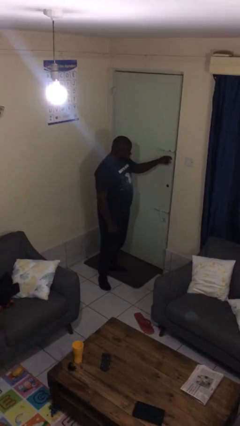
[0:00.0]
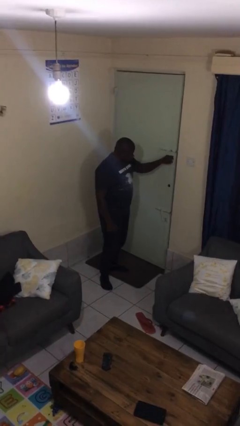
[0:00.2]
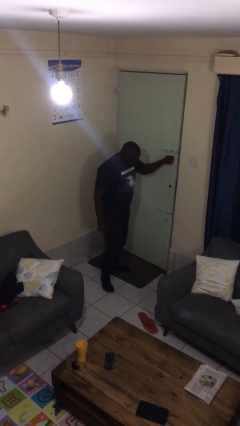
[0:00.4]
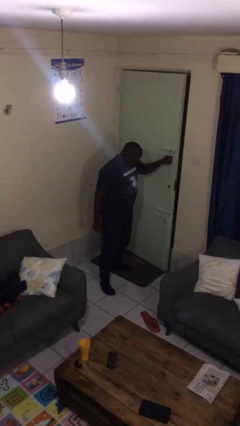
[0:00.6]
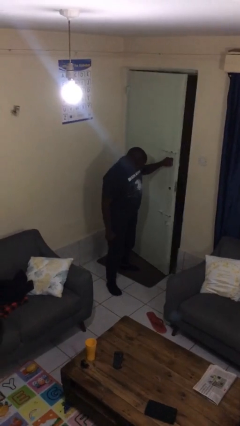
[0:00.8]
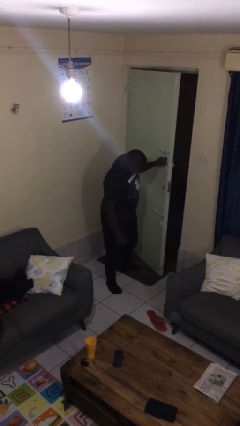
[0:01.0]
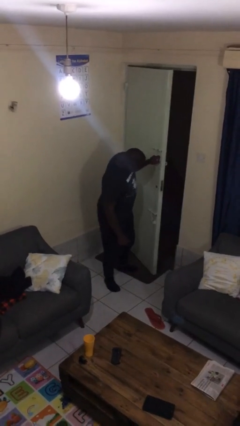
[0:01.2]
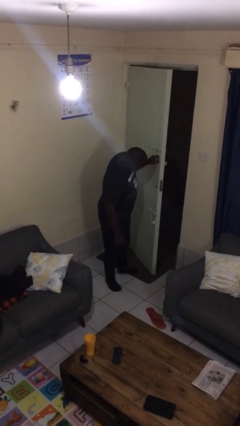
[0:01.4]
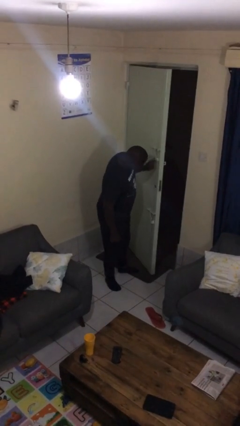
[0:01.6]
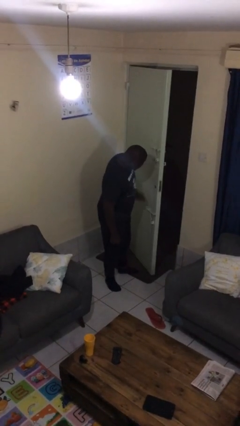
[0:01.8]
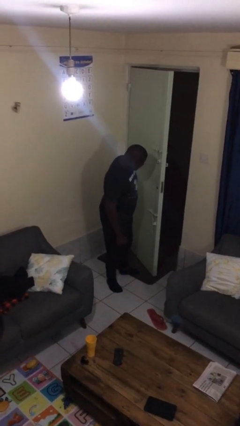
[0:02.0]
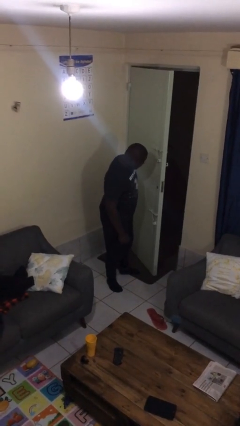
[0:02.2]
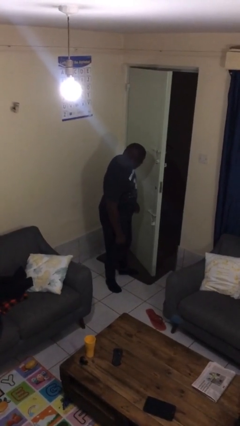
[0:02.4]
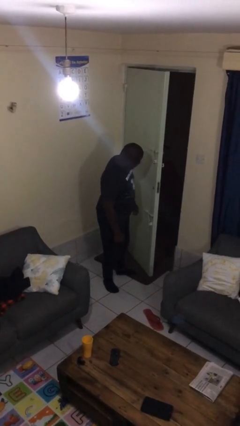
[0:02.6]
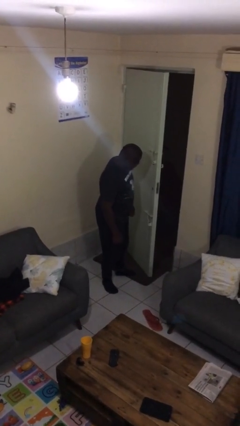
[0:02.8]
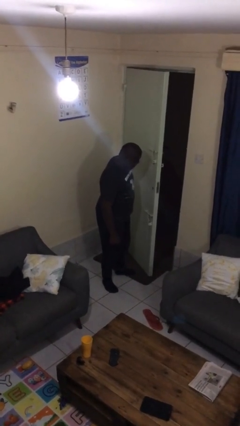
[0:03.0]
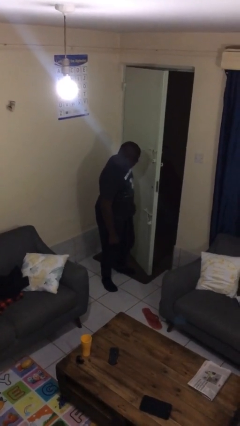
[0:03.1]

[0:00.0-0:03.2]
person opens facility door

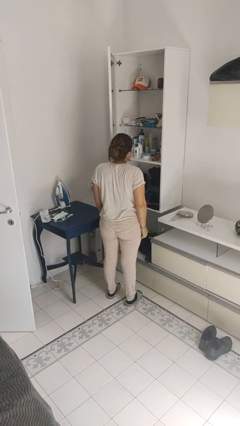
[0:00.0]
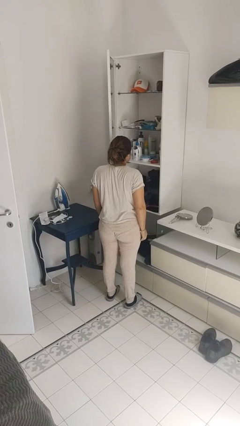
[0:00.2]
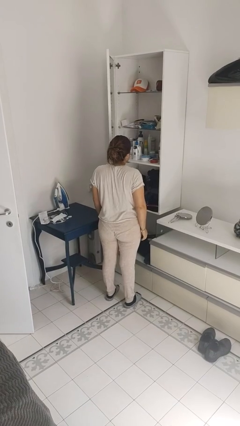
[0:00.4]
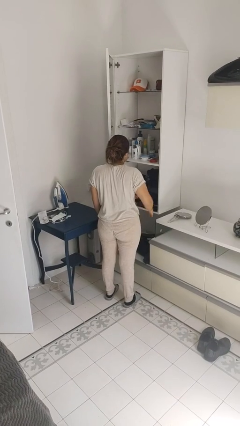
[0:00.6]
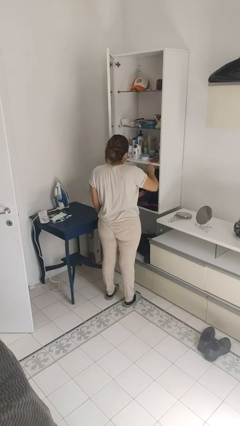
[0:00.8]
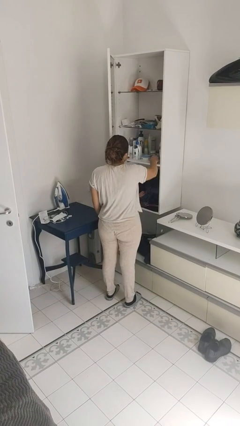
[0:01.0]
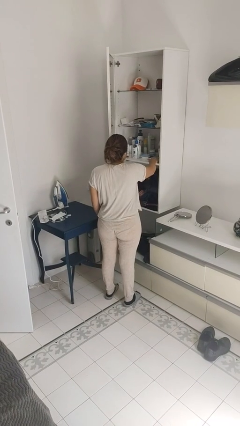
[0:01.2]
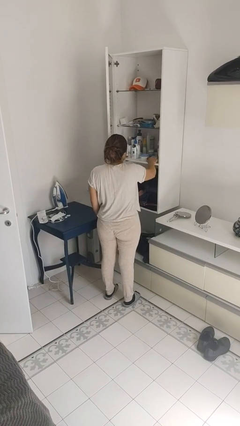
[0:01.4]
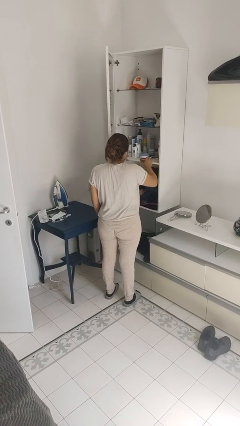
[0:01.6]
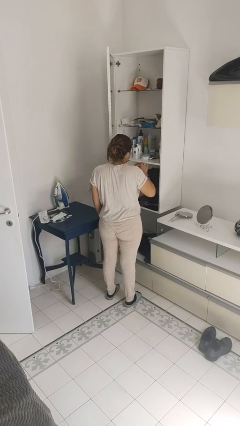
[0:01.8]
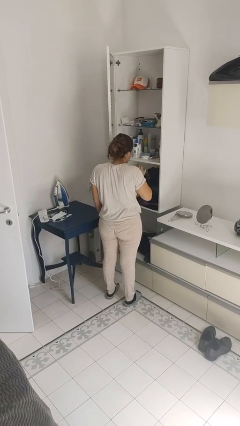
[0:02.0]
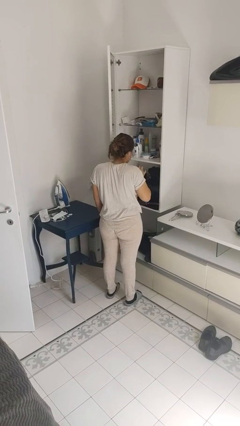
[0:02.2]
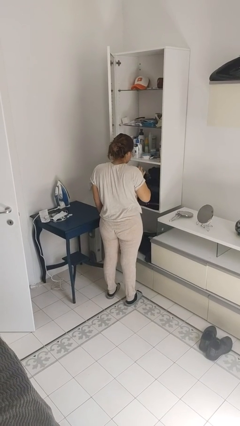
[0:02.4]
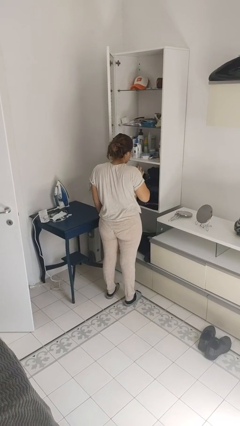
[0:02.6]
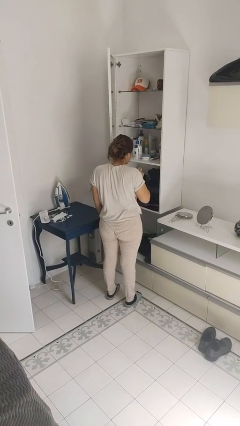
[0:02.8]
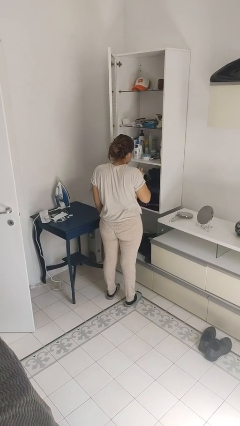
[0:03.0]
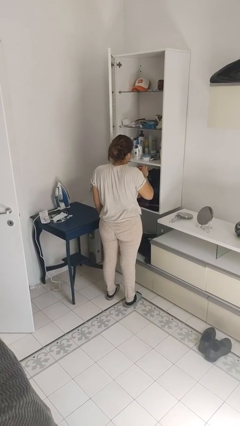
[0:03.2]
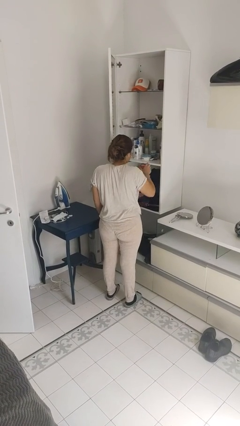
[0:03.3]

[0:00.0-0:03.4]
person picks up object from shelf

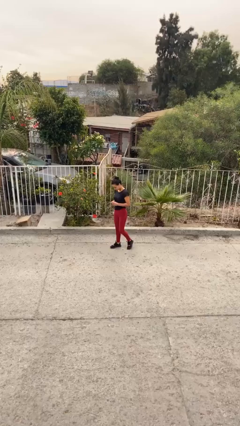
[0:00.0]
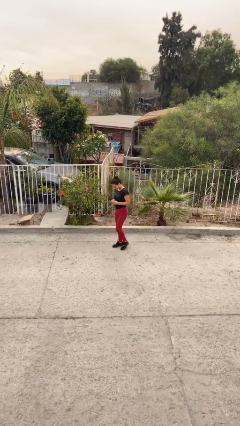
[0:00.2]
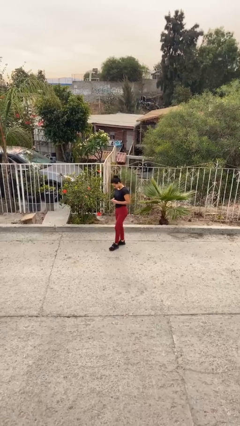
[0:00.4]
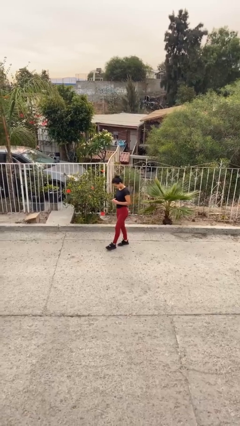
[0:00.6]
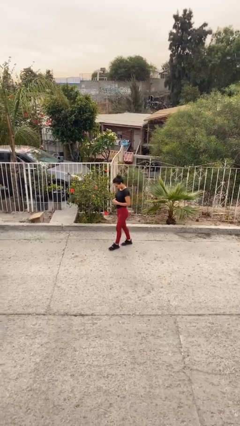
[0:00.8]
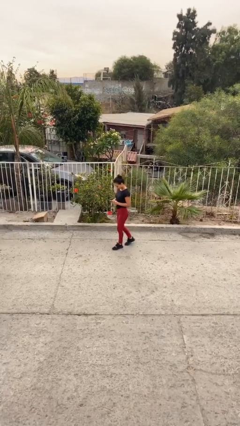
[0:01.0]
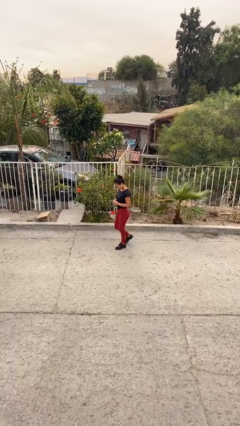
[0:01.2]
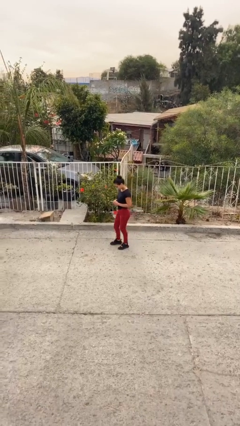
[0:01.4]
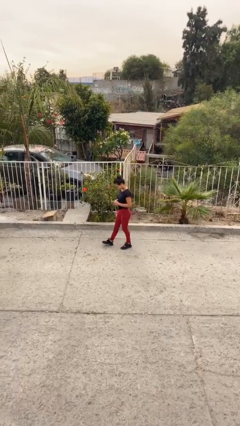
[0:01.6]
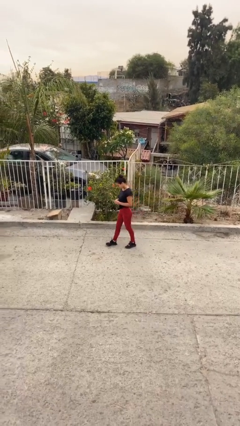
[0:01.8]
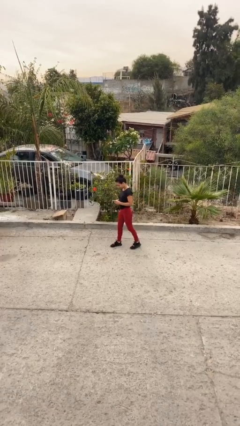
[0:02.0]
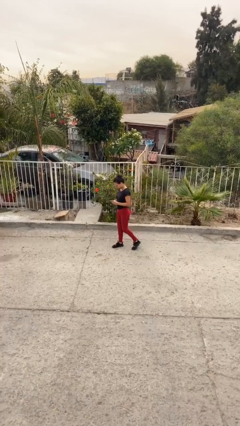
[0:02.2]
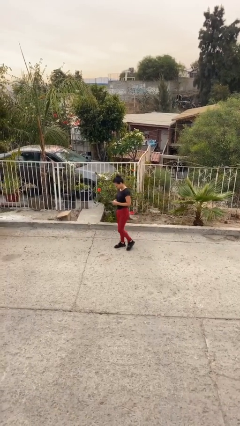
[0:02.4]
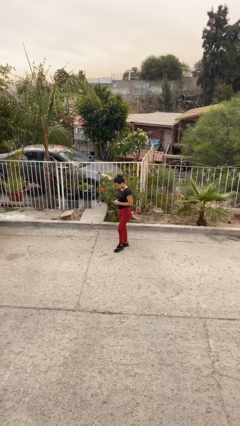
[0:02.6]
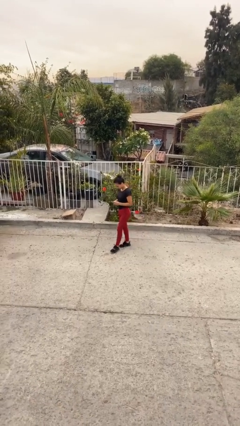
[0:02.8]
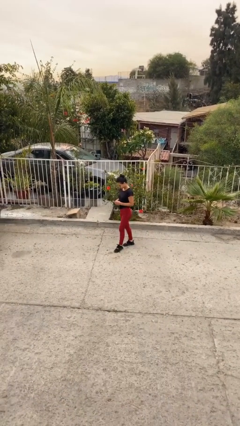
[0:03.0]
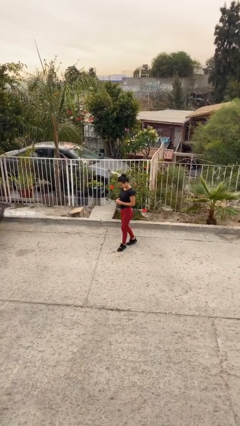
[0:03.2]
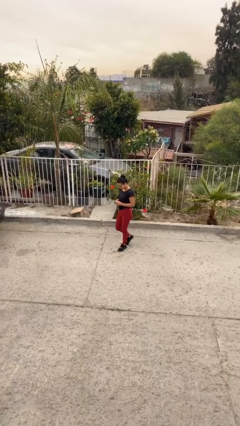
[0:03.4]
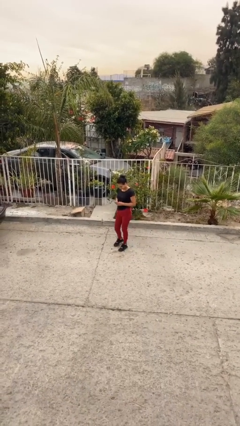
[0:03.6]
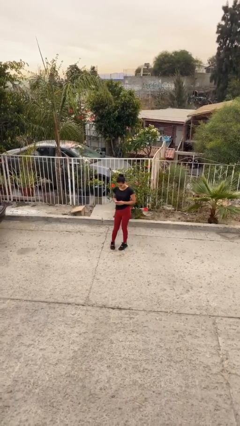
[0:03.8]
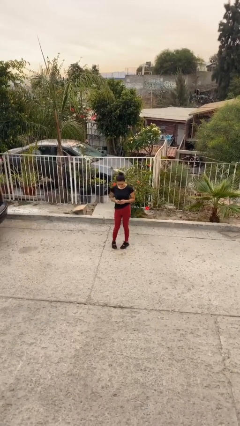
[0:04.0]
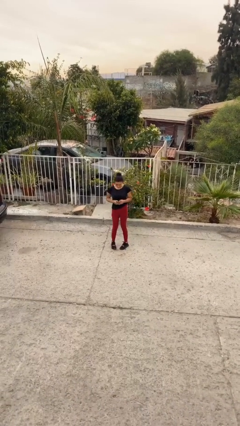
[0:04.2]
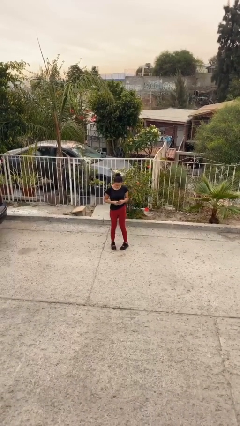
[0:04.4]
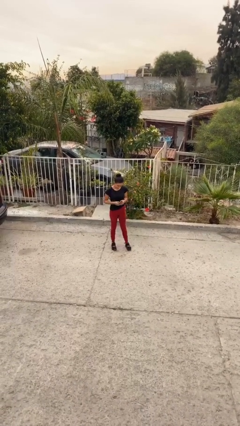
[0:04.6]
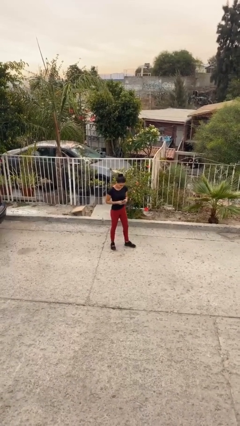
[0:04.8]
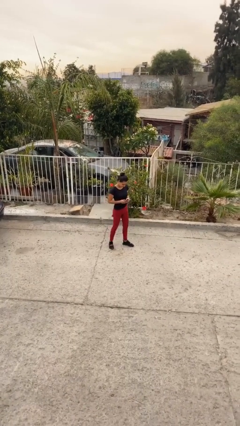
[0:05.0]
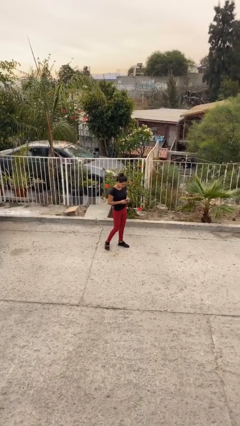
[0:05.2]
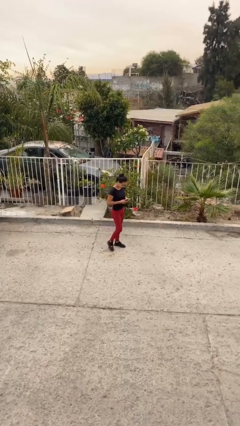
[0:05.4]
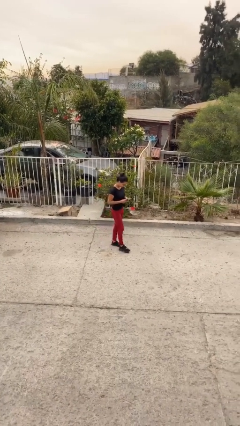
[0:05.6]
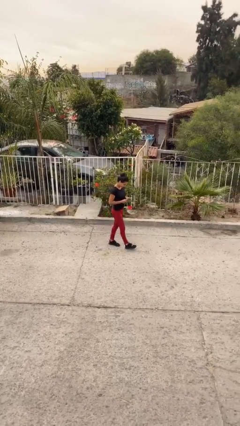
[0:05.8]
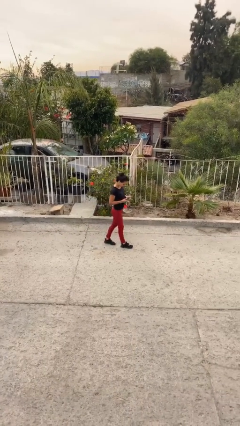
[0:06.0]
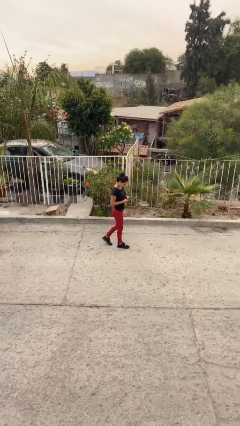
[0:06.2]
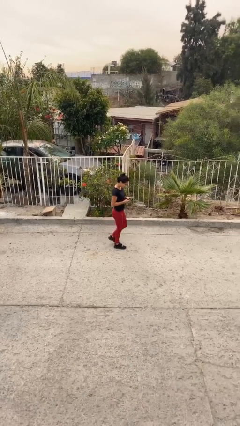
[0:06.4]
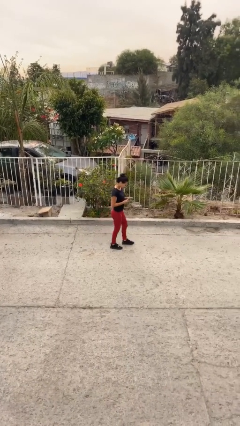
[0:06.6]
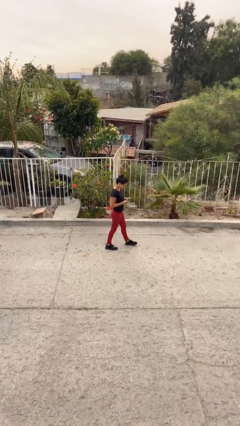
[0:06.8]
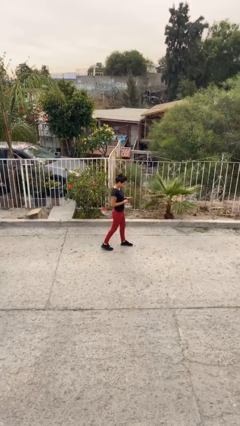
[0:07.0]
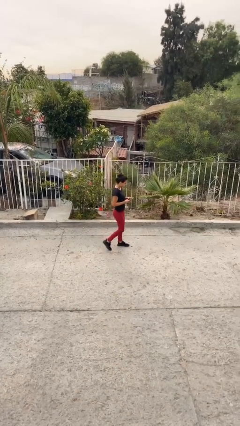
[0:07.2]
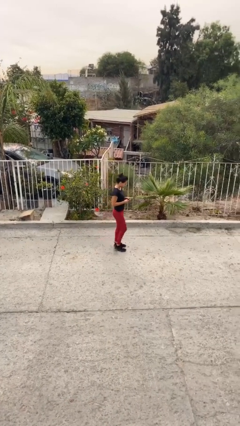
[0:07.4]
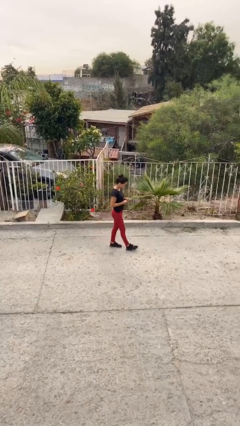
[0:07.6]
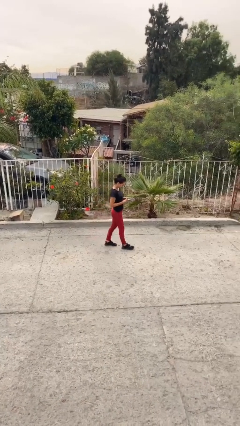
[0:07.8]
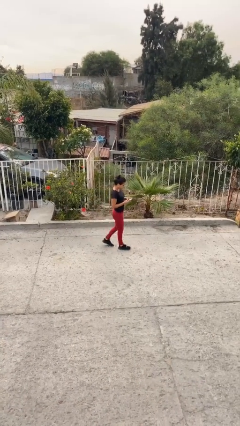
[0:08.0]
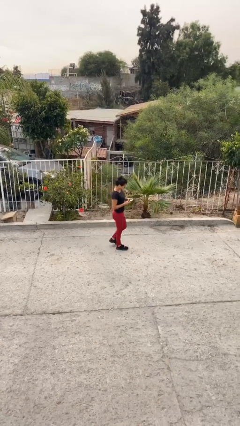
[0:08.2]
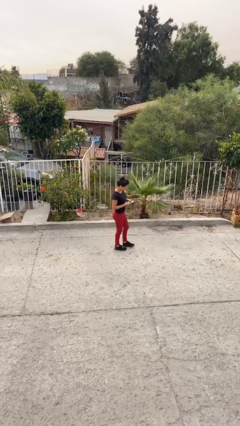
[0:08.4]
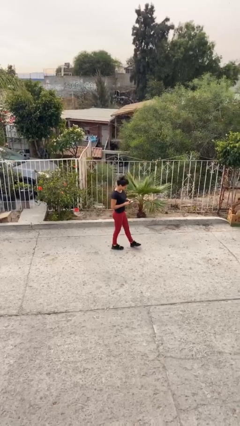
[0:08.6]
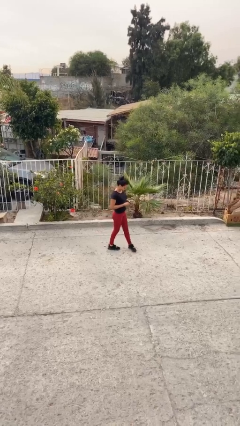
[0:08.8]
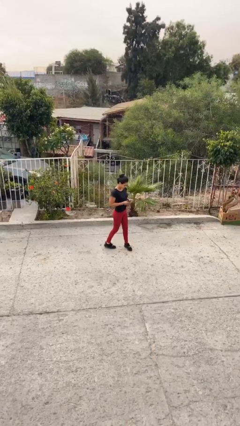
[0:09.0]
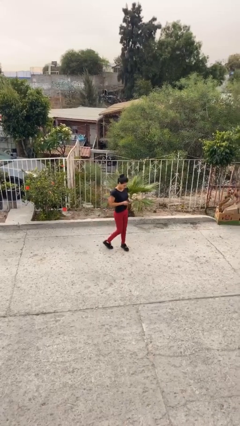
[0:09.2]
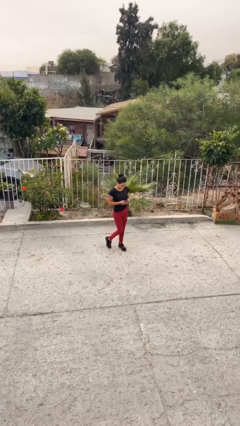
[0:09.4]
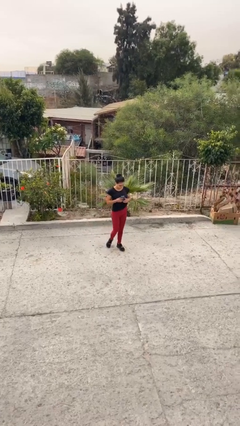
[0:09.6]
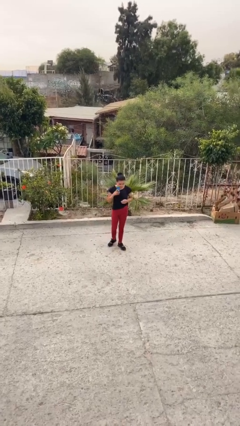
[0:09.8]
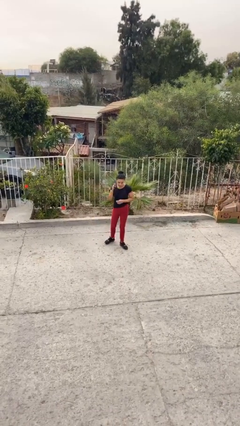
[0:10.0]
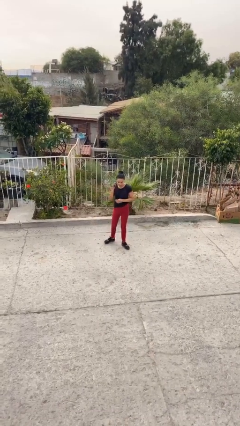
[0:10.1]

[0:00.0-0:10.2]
person texts on phone

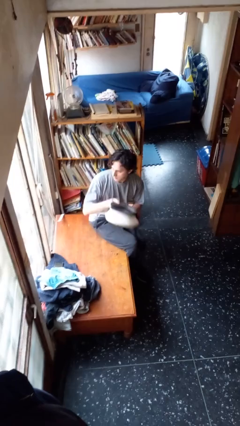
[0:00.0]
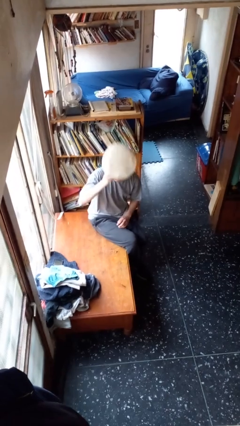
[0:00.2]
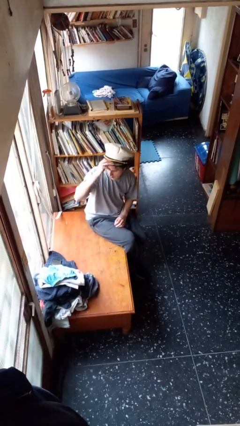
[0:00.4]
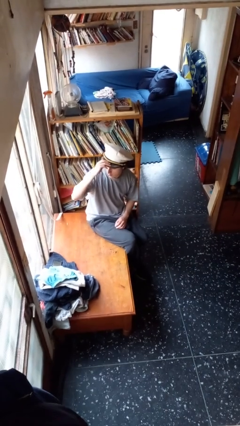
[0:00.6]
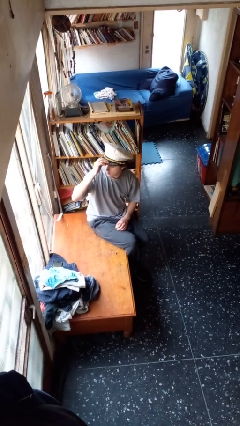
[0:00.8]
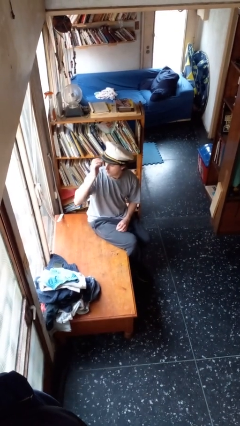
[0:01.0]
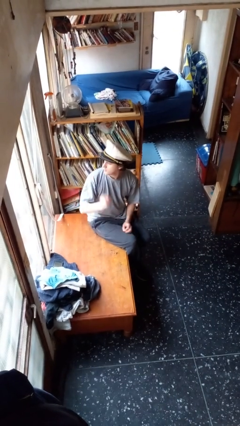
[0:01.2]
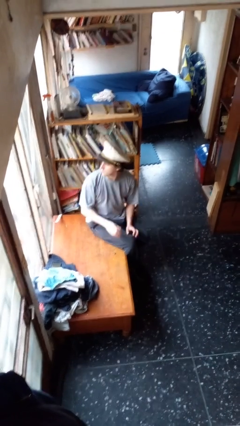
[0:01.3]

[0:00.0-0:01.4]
person puts on hat
